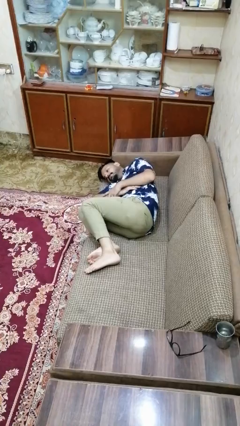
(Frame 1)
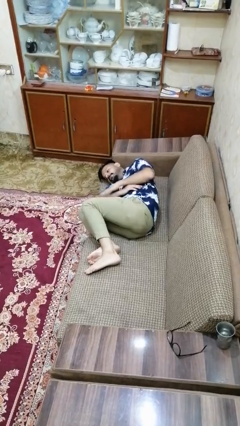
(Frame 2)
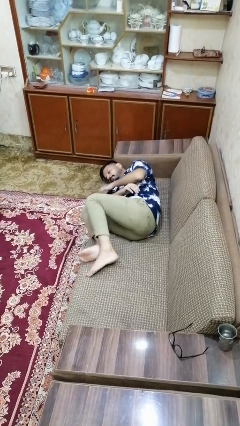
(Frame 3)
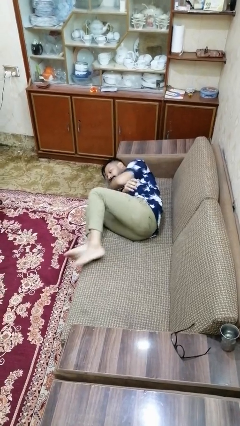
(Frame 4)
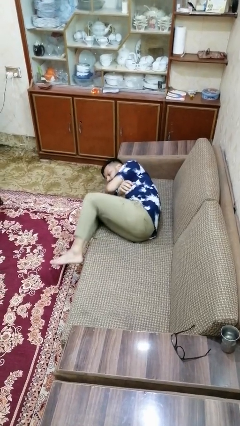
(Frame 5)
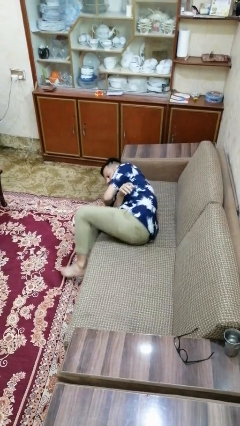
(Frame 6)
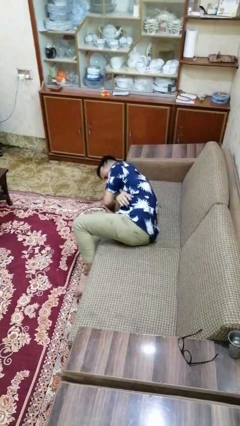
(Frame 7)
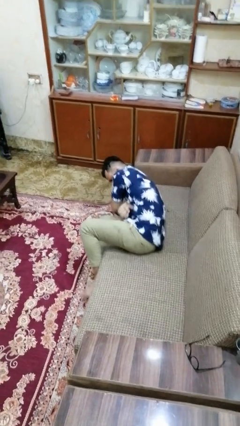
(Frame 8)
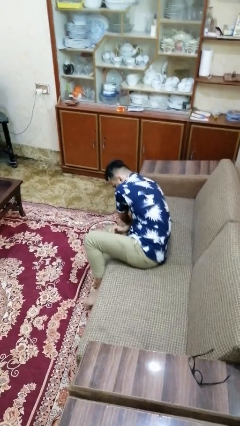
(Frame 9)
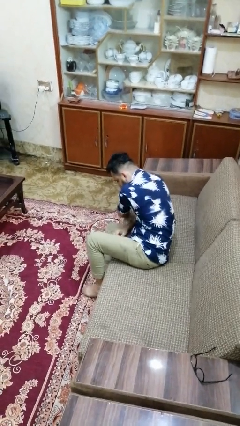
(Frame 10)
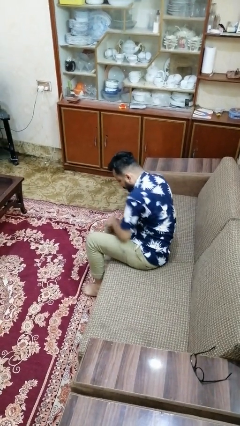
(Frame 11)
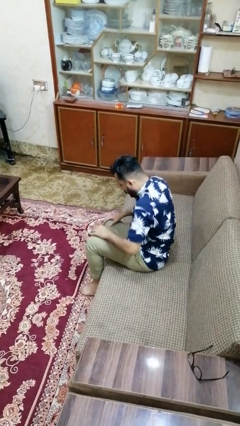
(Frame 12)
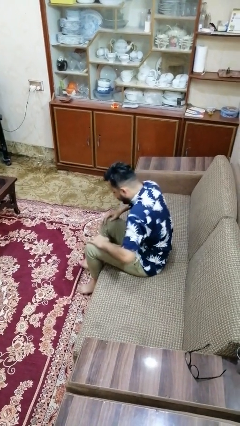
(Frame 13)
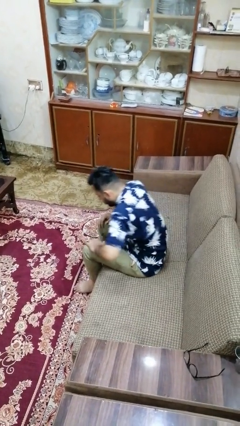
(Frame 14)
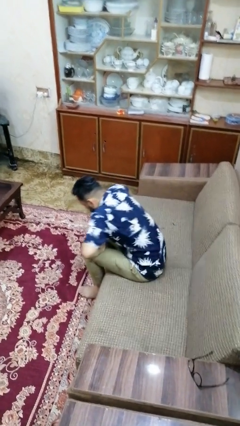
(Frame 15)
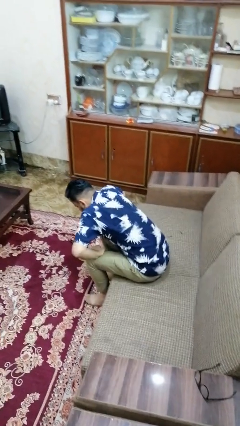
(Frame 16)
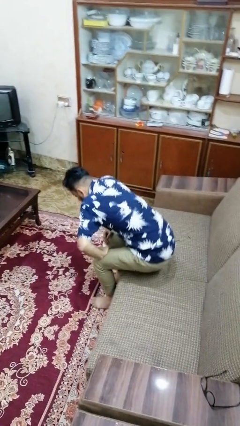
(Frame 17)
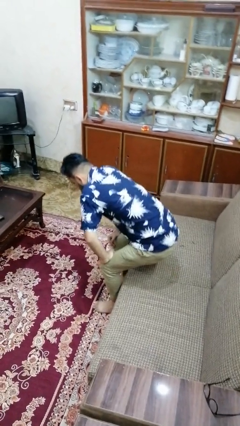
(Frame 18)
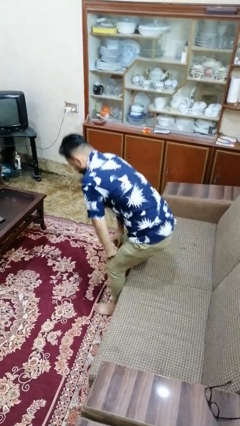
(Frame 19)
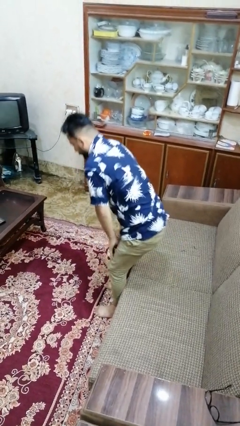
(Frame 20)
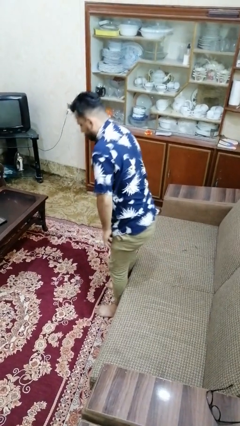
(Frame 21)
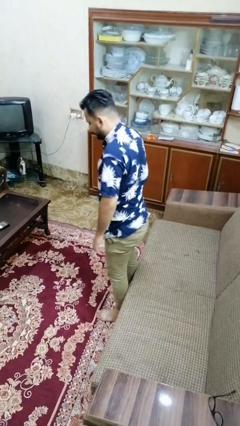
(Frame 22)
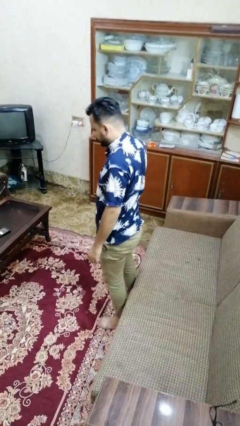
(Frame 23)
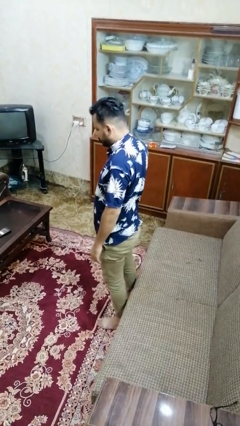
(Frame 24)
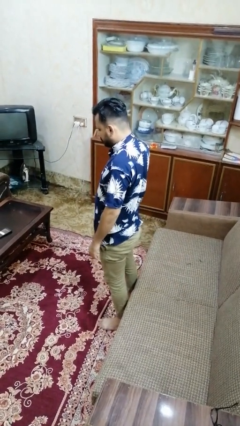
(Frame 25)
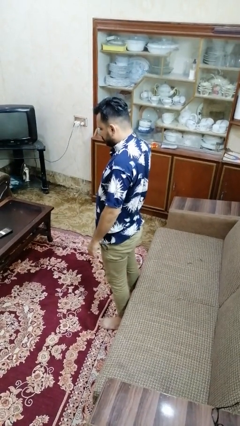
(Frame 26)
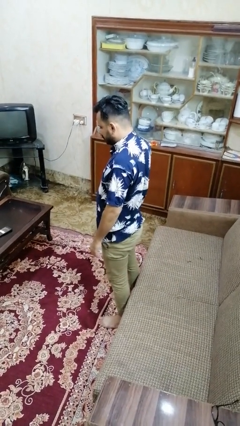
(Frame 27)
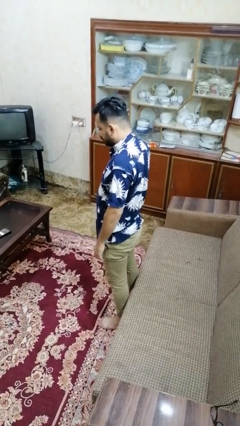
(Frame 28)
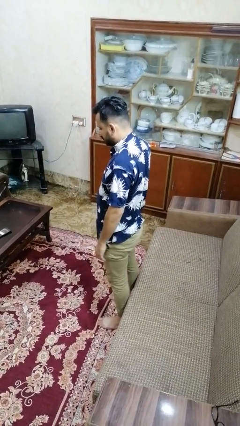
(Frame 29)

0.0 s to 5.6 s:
person stands up

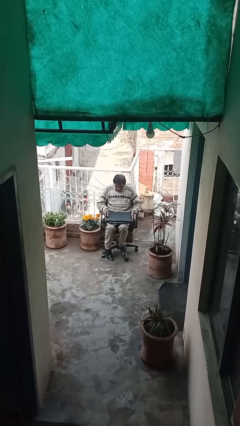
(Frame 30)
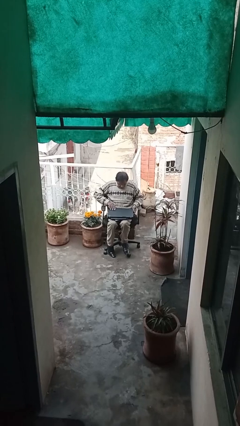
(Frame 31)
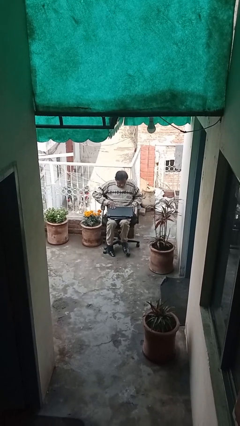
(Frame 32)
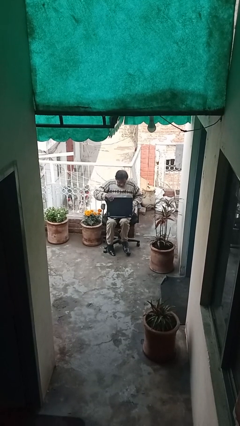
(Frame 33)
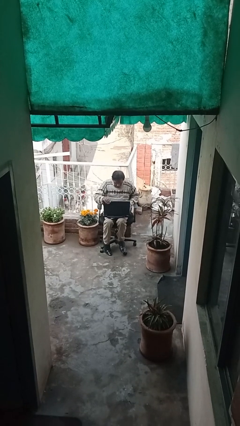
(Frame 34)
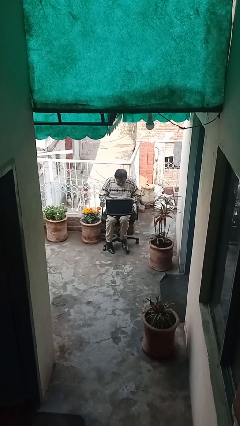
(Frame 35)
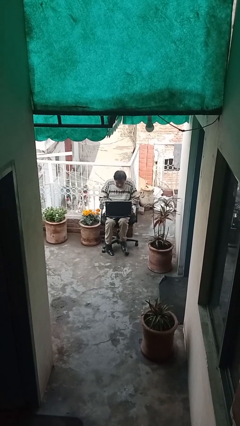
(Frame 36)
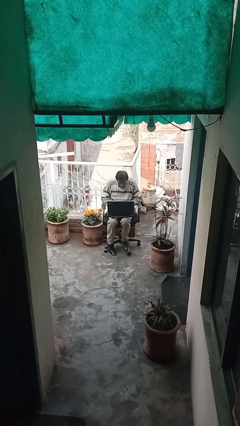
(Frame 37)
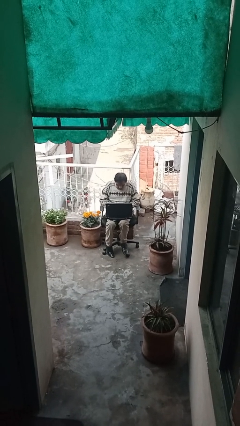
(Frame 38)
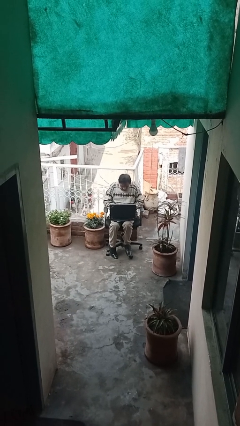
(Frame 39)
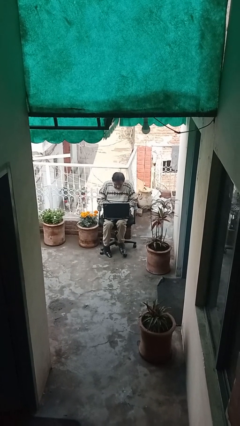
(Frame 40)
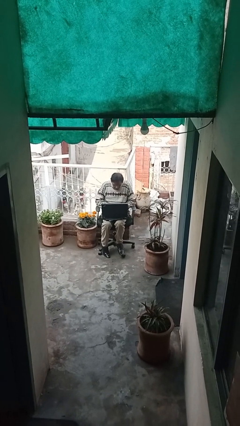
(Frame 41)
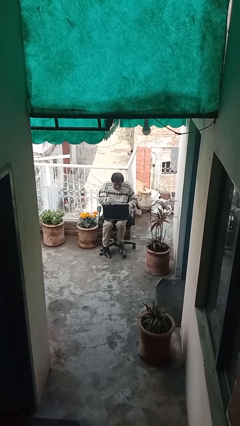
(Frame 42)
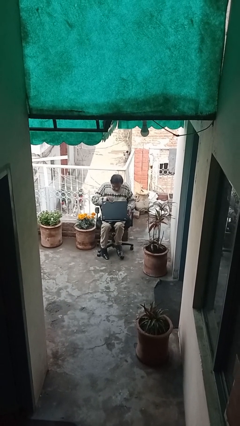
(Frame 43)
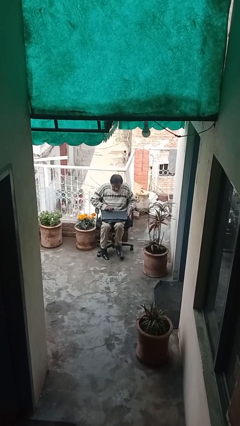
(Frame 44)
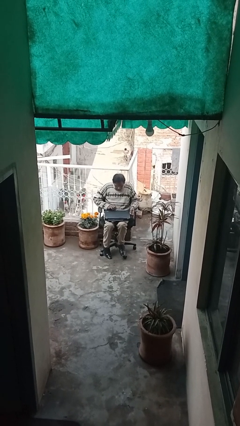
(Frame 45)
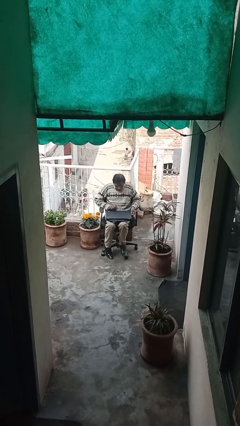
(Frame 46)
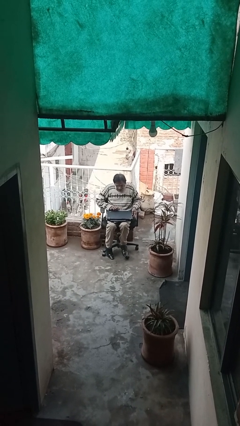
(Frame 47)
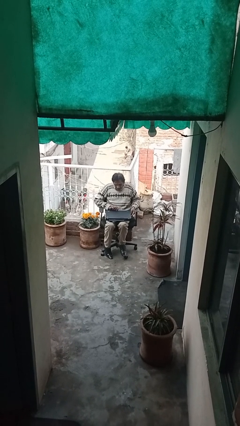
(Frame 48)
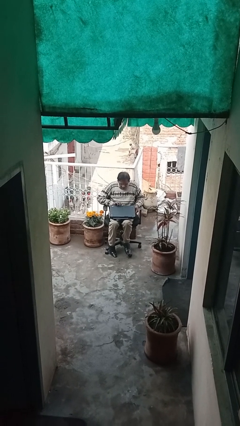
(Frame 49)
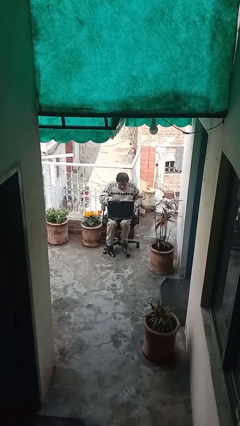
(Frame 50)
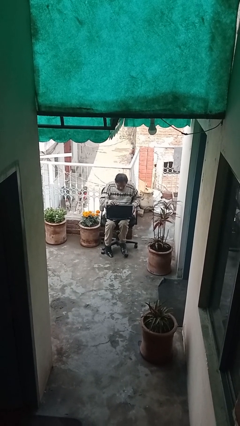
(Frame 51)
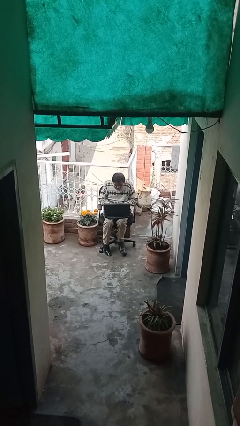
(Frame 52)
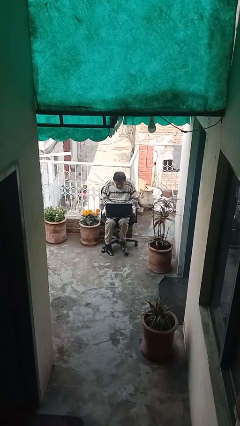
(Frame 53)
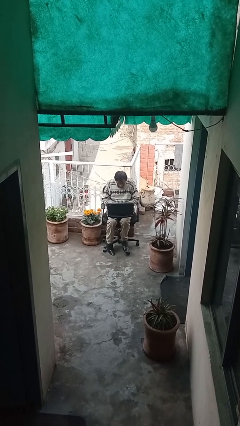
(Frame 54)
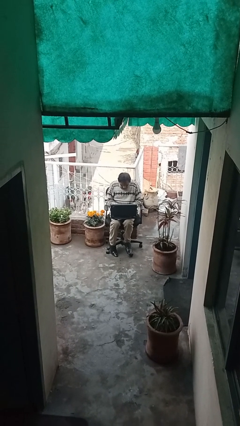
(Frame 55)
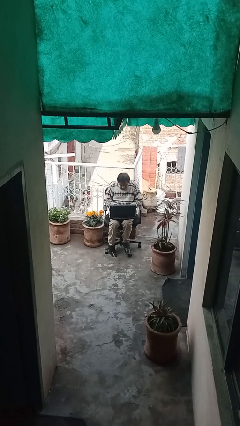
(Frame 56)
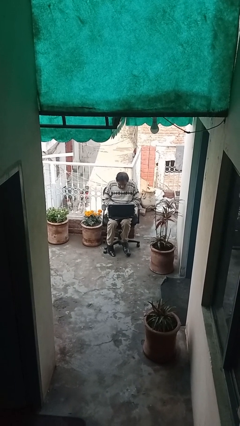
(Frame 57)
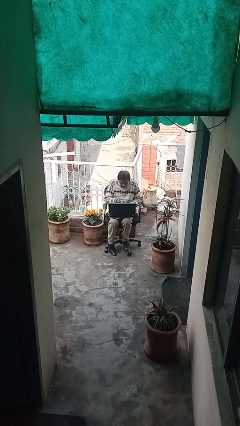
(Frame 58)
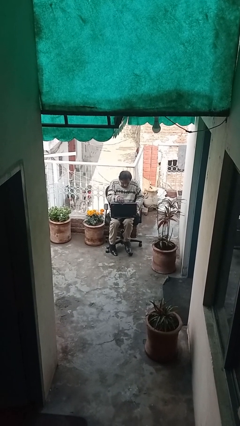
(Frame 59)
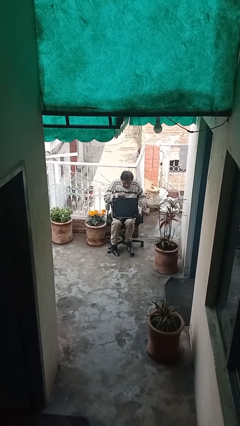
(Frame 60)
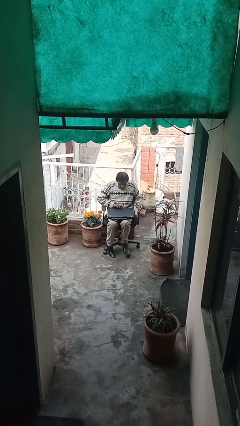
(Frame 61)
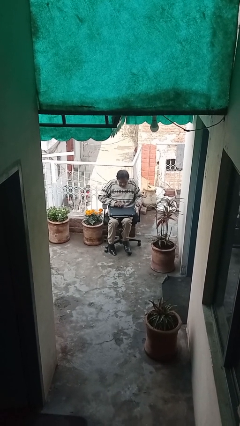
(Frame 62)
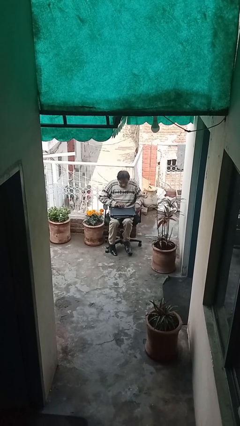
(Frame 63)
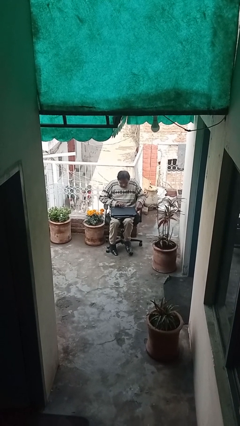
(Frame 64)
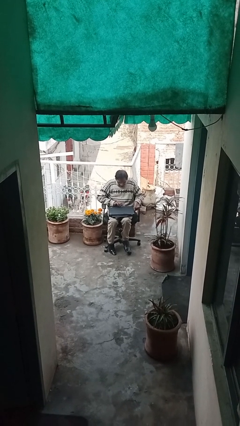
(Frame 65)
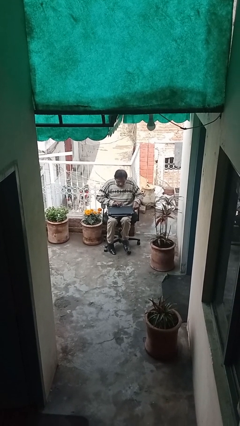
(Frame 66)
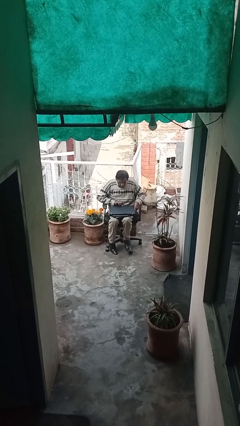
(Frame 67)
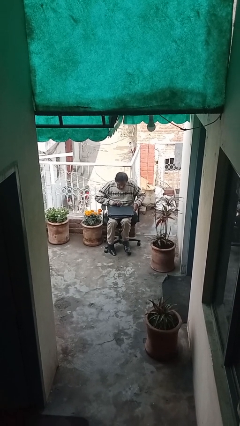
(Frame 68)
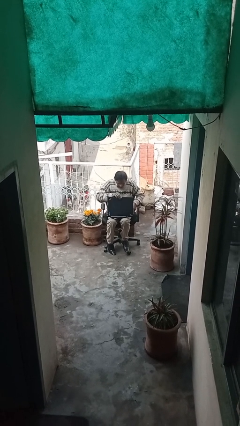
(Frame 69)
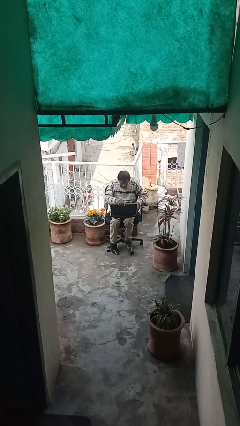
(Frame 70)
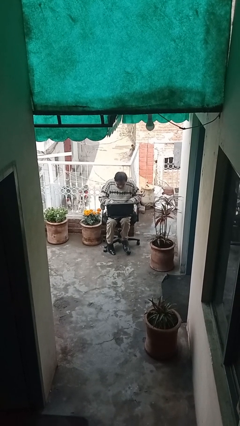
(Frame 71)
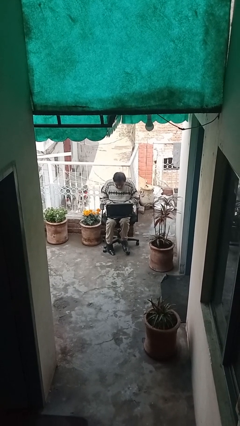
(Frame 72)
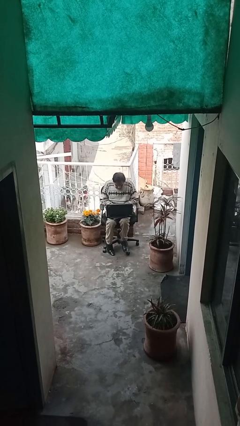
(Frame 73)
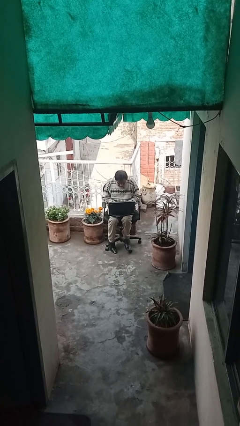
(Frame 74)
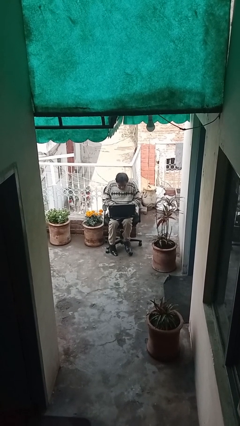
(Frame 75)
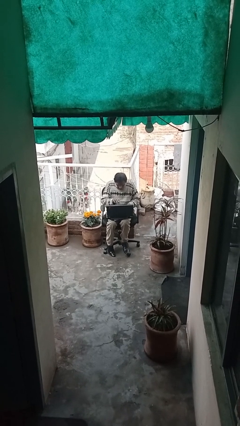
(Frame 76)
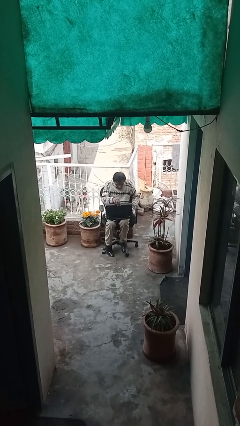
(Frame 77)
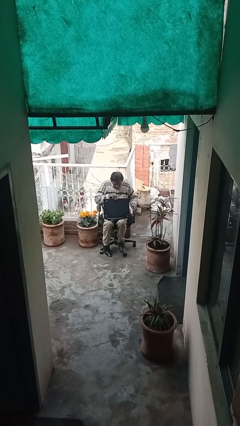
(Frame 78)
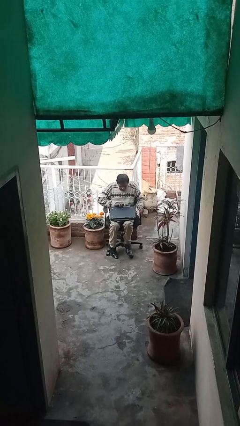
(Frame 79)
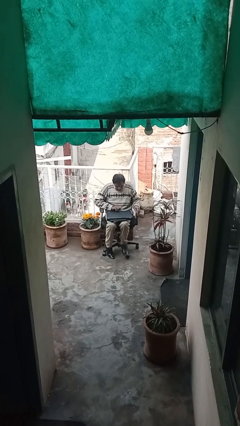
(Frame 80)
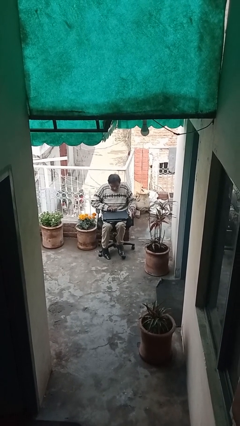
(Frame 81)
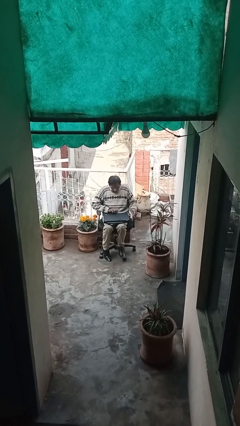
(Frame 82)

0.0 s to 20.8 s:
person interacts with laptop

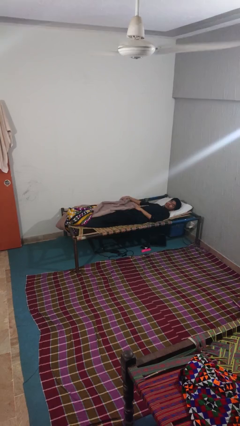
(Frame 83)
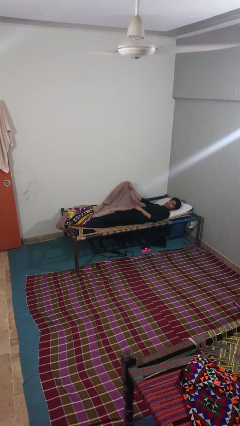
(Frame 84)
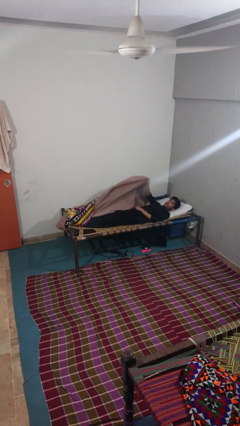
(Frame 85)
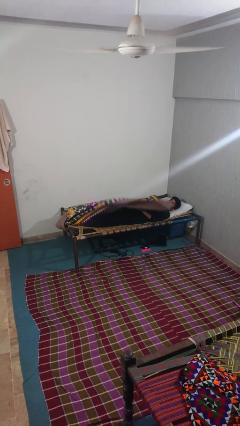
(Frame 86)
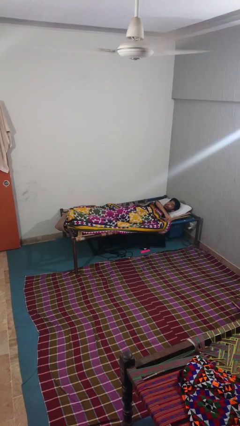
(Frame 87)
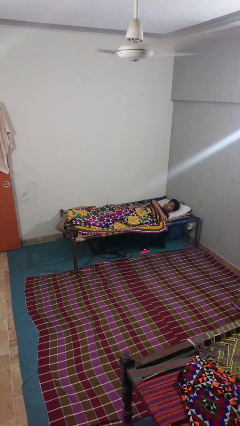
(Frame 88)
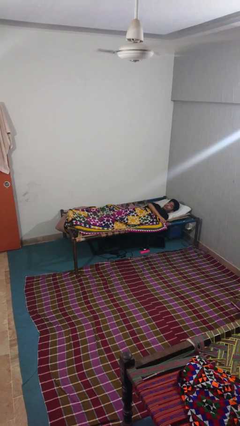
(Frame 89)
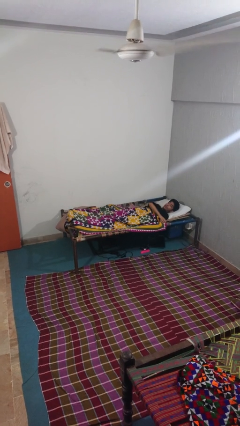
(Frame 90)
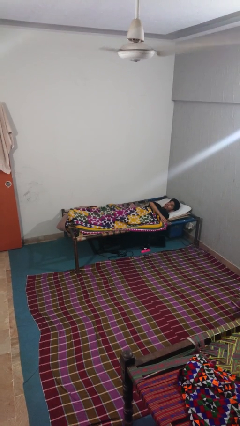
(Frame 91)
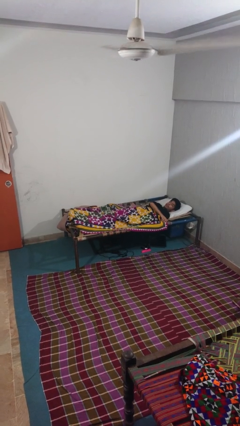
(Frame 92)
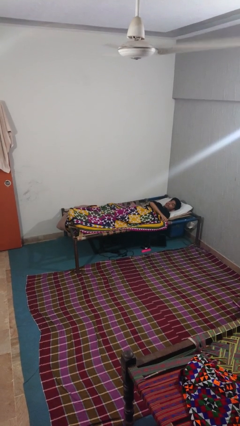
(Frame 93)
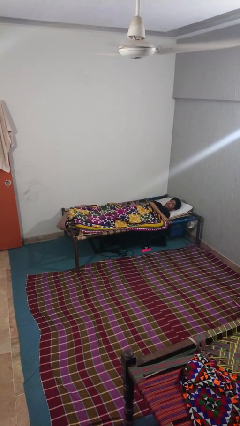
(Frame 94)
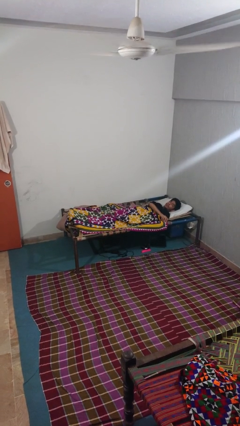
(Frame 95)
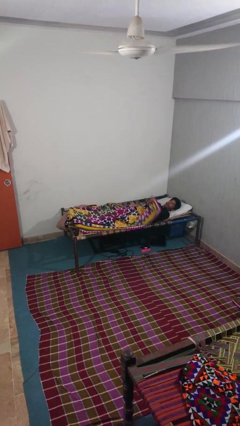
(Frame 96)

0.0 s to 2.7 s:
person covers with bedsheets
